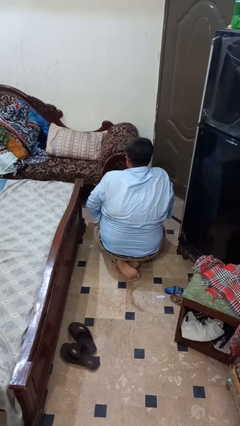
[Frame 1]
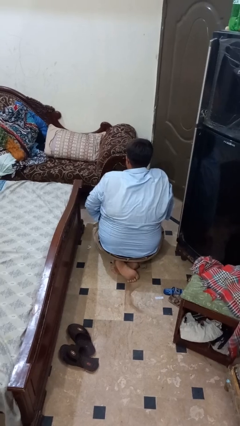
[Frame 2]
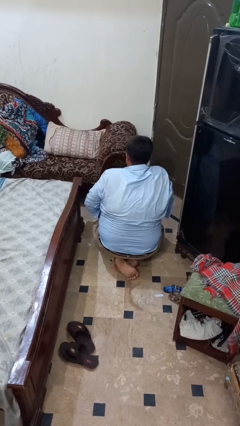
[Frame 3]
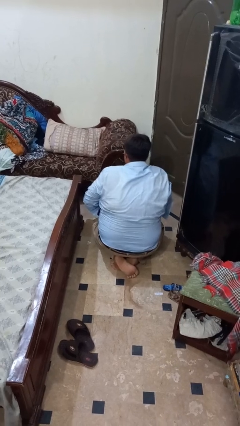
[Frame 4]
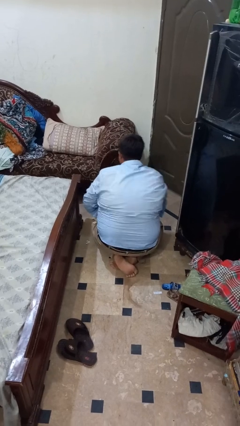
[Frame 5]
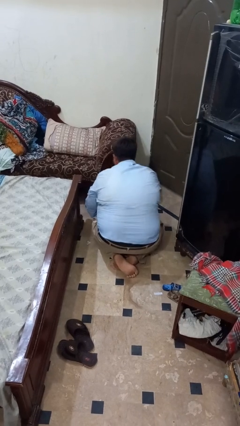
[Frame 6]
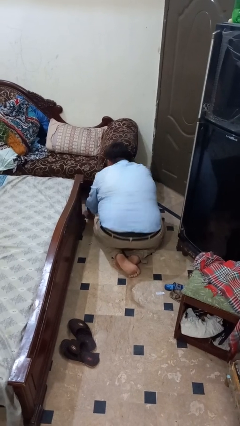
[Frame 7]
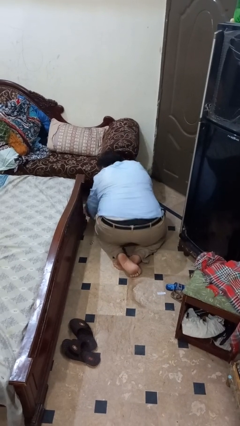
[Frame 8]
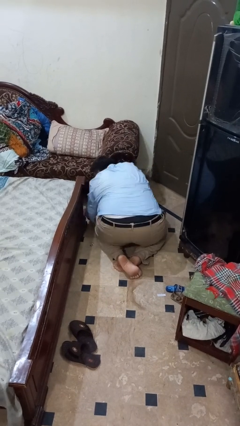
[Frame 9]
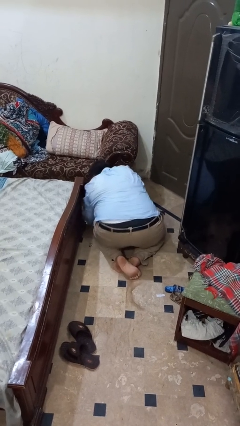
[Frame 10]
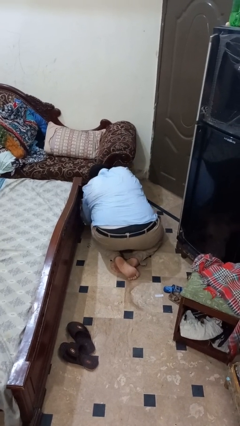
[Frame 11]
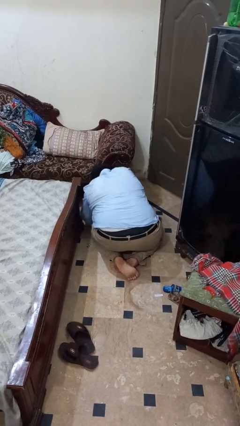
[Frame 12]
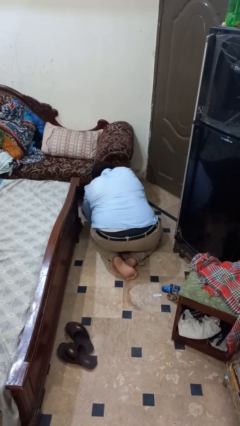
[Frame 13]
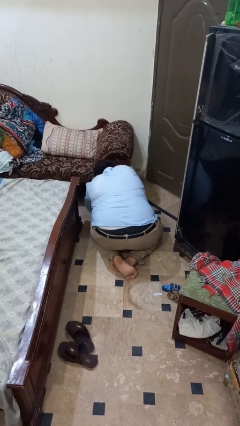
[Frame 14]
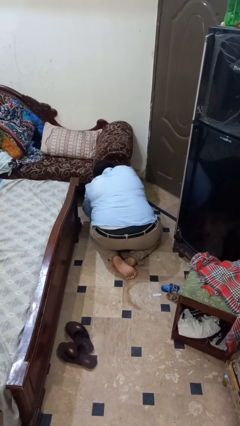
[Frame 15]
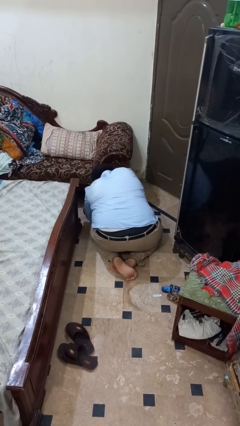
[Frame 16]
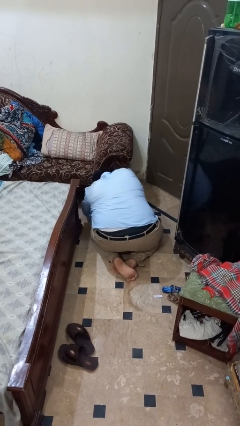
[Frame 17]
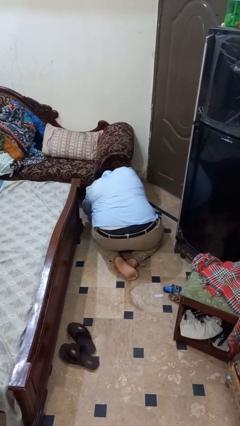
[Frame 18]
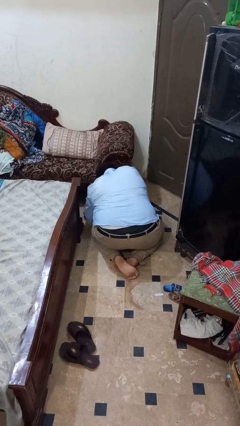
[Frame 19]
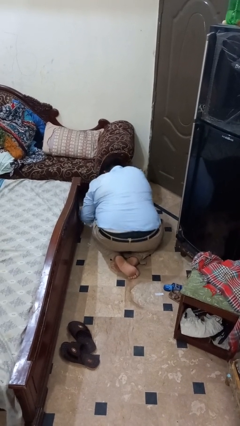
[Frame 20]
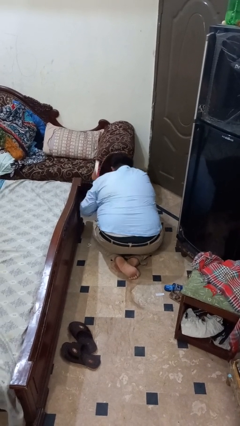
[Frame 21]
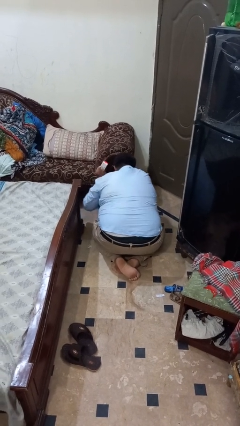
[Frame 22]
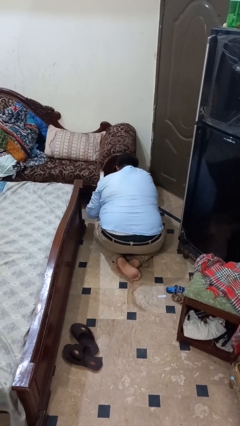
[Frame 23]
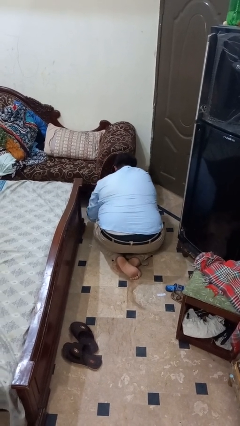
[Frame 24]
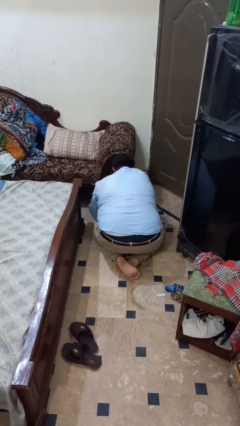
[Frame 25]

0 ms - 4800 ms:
person searches under couch

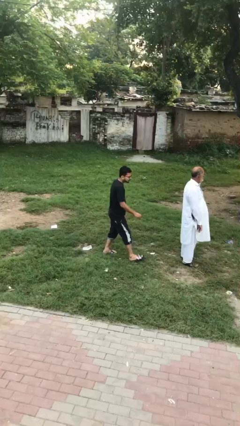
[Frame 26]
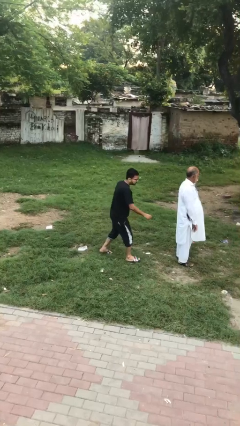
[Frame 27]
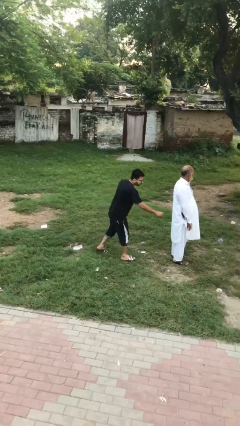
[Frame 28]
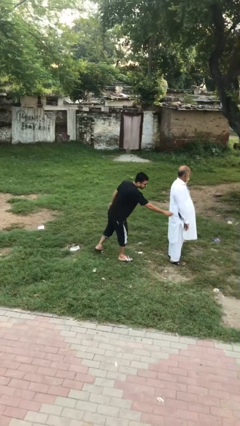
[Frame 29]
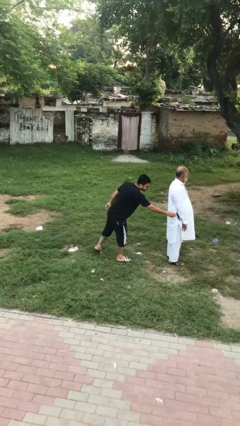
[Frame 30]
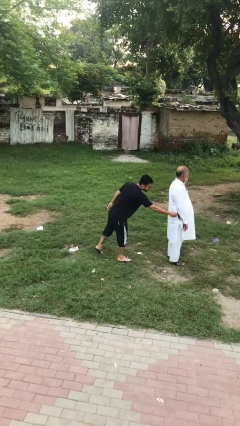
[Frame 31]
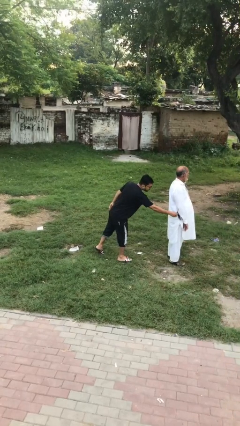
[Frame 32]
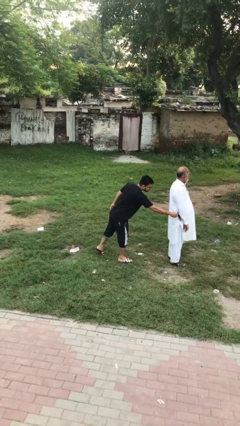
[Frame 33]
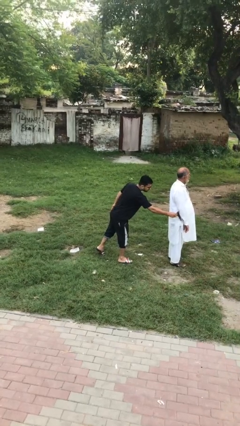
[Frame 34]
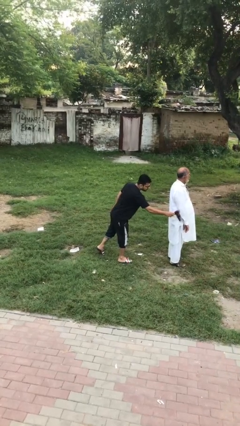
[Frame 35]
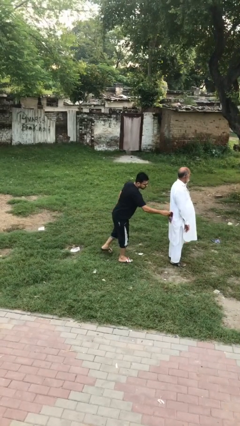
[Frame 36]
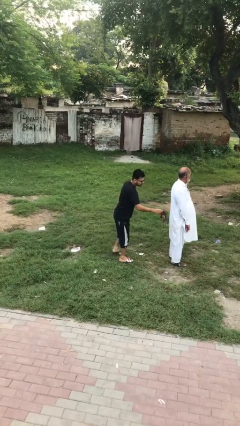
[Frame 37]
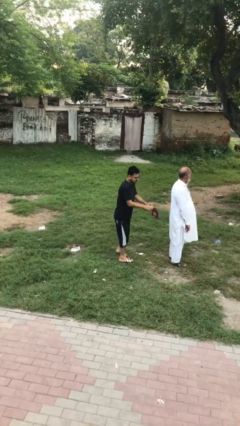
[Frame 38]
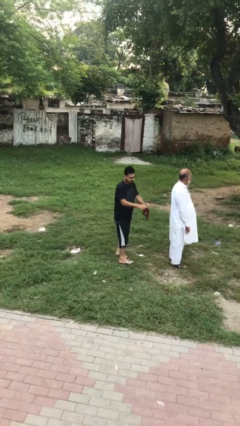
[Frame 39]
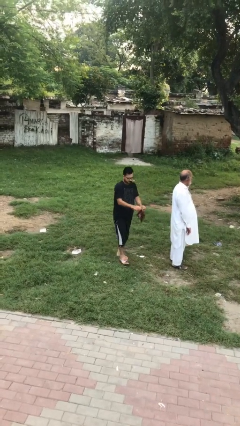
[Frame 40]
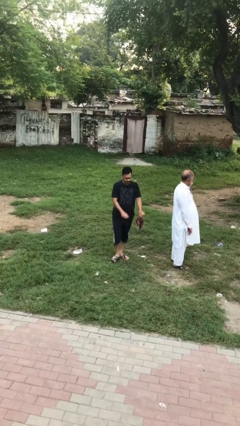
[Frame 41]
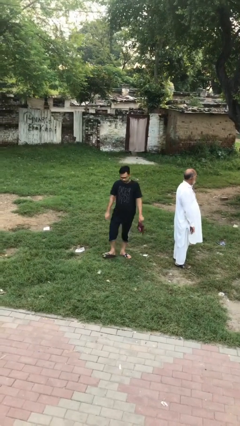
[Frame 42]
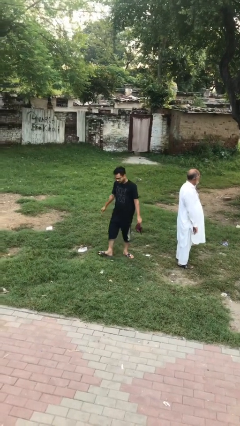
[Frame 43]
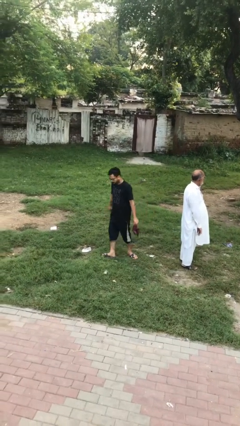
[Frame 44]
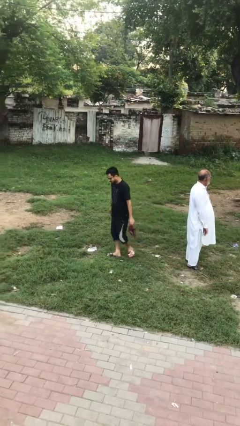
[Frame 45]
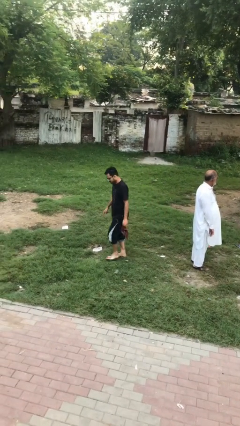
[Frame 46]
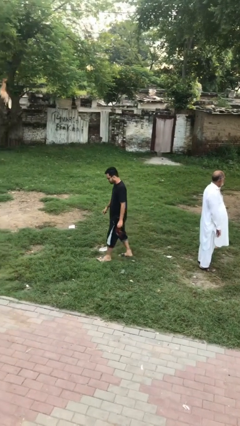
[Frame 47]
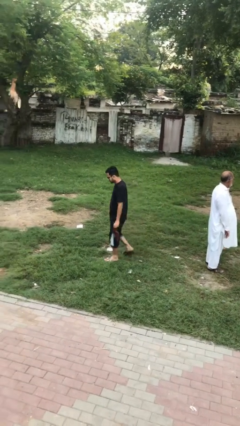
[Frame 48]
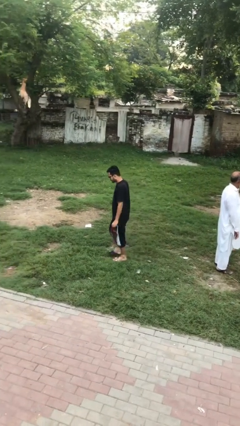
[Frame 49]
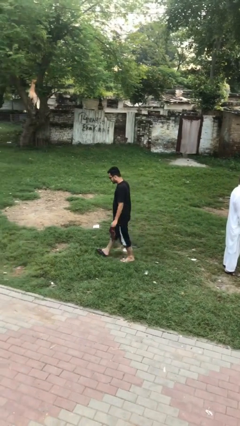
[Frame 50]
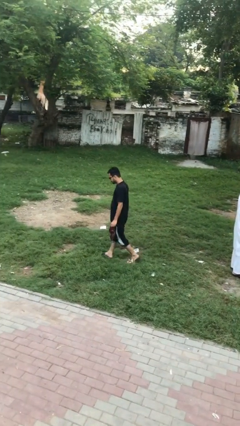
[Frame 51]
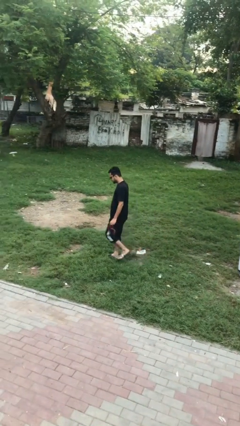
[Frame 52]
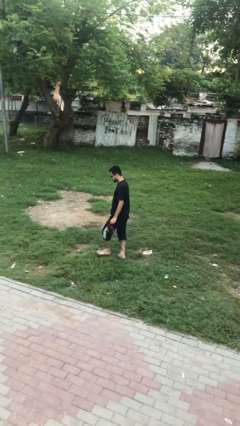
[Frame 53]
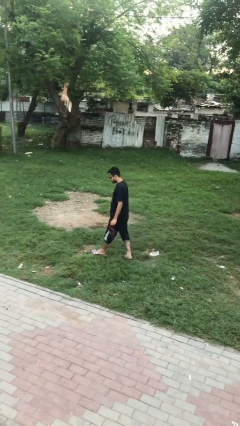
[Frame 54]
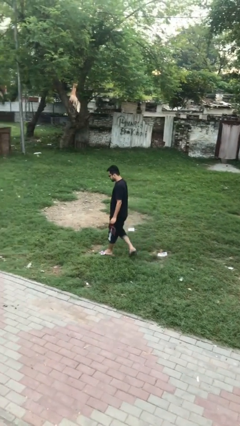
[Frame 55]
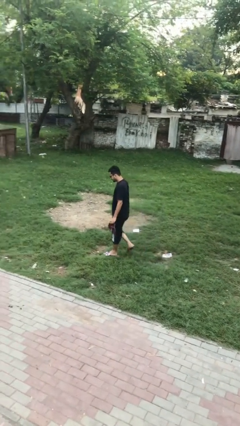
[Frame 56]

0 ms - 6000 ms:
person steals object from person

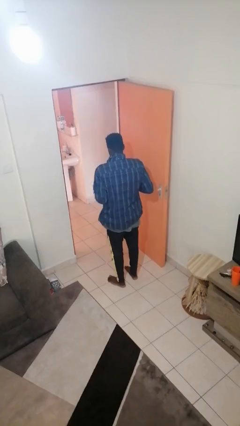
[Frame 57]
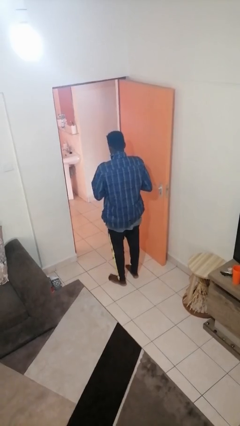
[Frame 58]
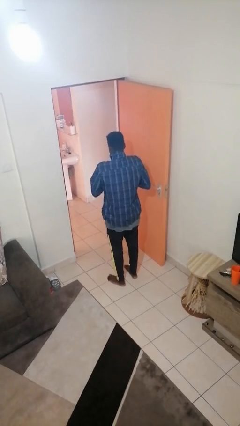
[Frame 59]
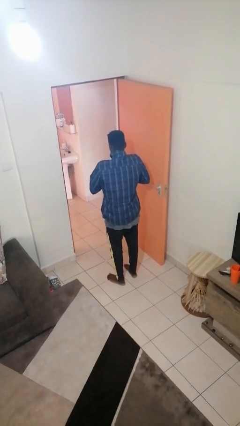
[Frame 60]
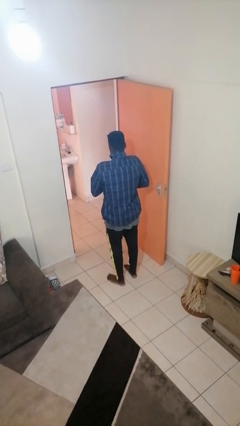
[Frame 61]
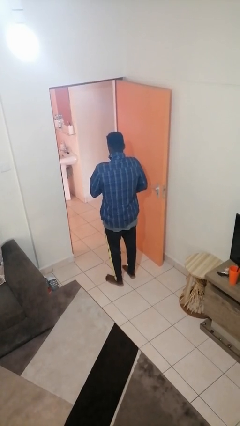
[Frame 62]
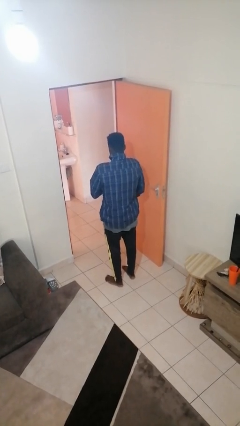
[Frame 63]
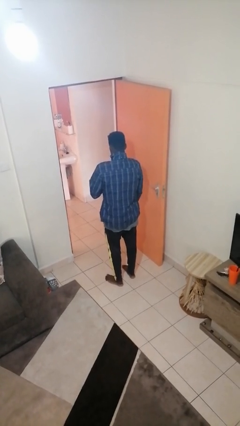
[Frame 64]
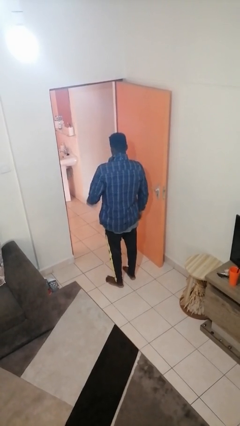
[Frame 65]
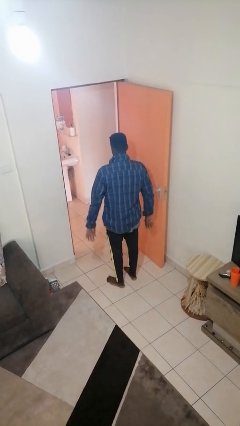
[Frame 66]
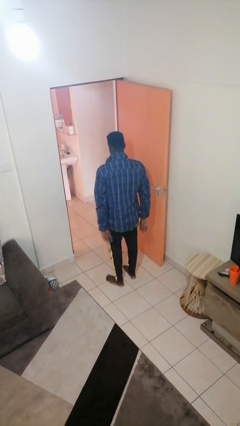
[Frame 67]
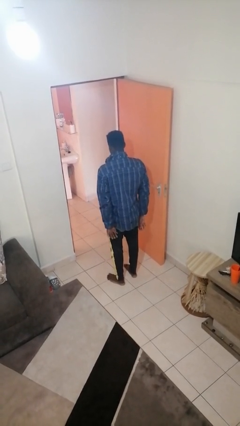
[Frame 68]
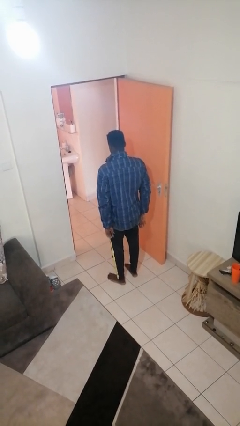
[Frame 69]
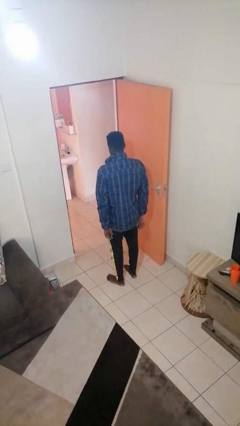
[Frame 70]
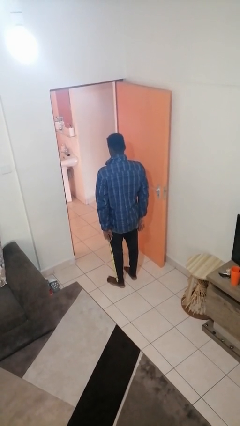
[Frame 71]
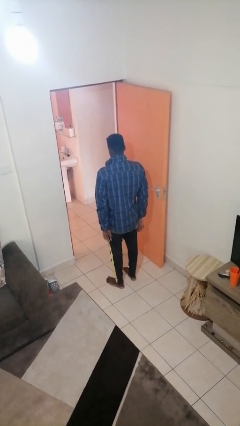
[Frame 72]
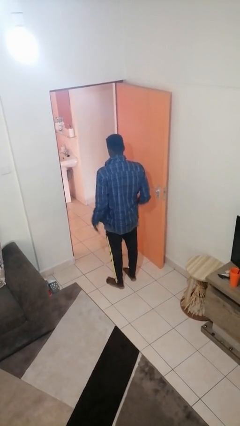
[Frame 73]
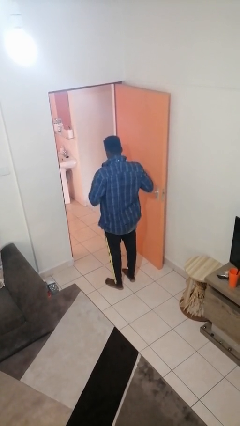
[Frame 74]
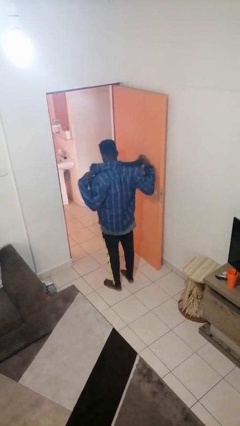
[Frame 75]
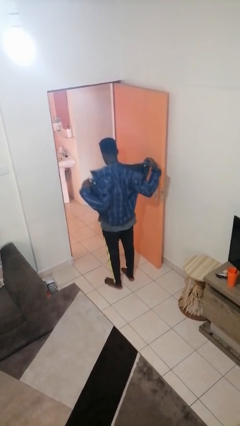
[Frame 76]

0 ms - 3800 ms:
person unzips jacket

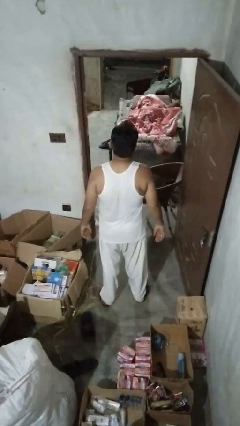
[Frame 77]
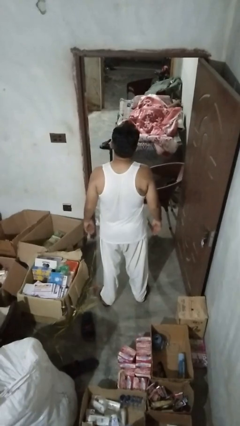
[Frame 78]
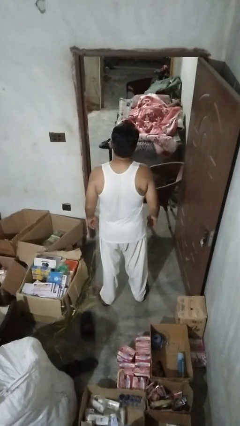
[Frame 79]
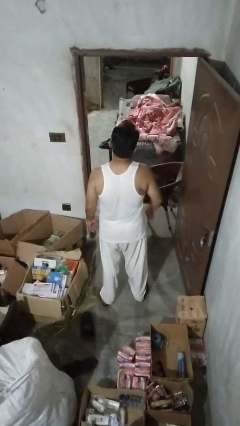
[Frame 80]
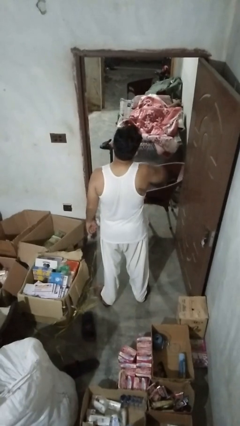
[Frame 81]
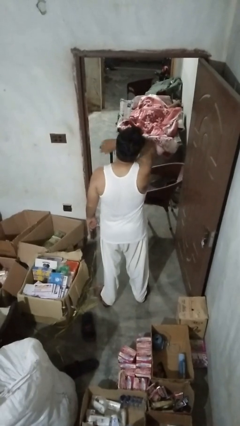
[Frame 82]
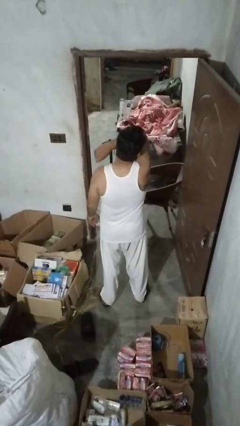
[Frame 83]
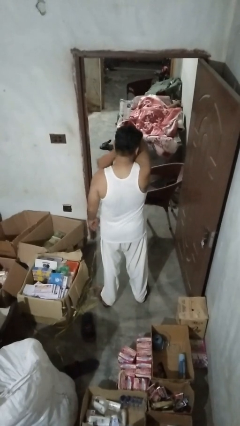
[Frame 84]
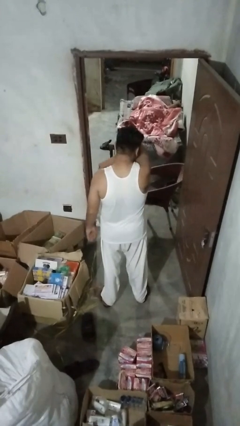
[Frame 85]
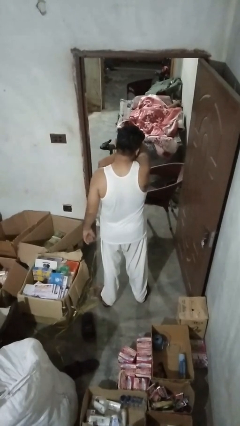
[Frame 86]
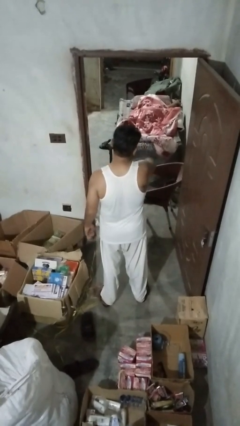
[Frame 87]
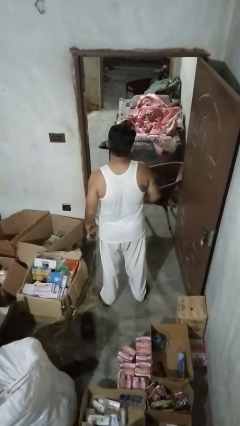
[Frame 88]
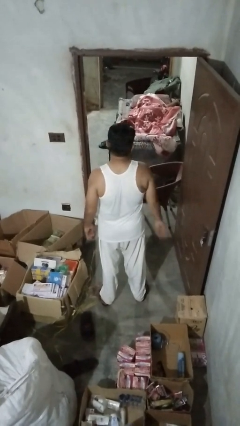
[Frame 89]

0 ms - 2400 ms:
person sneezes into arm

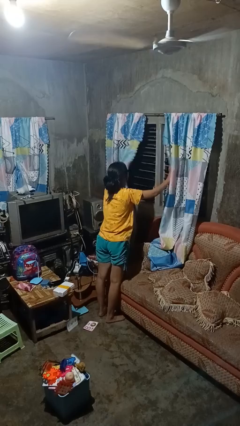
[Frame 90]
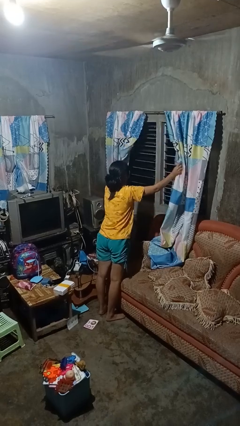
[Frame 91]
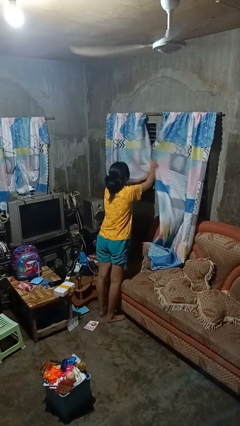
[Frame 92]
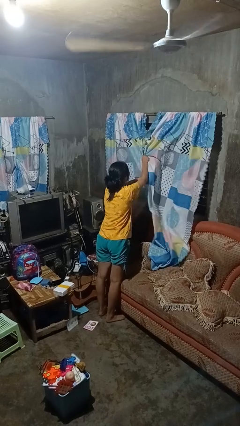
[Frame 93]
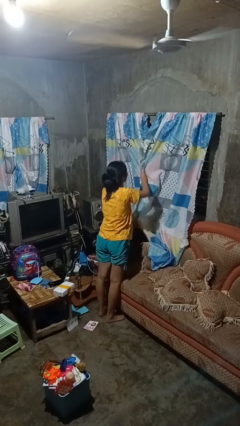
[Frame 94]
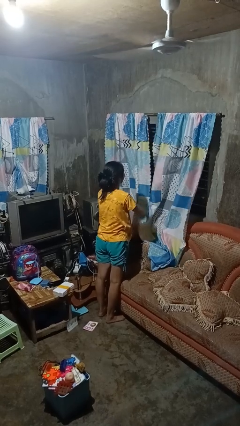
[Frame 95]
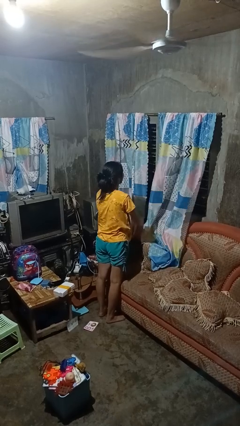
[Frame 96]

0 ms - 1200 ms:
person closes curtains
